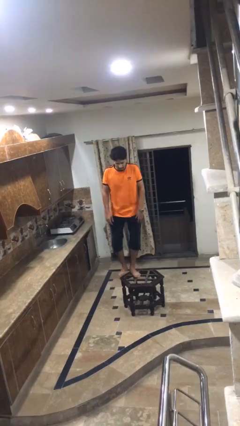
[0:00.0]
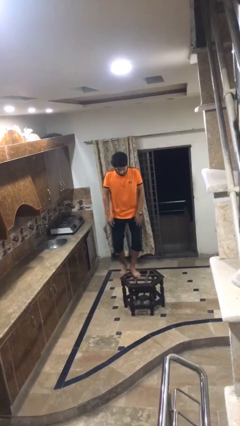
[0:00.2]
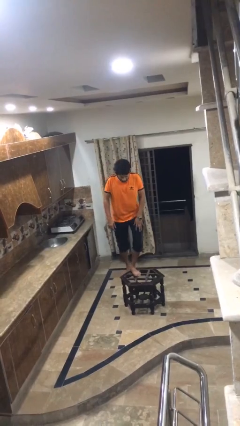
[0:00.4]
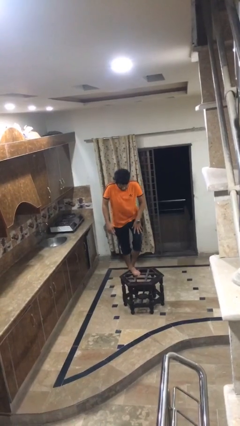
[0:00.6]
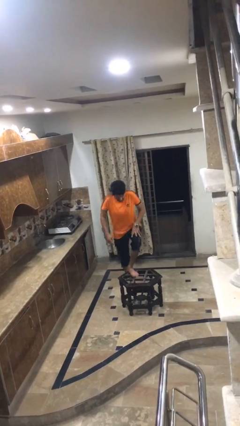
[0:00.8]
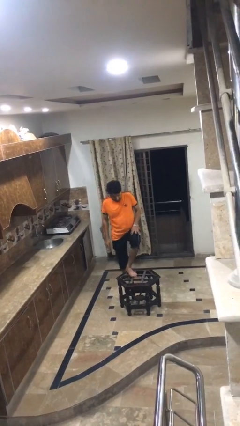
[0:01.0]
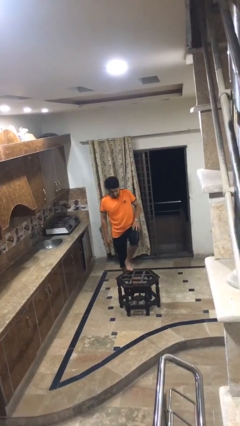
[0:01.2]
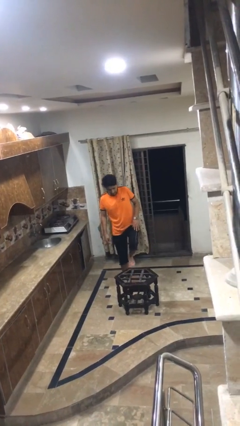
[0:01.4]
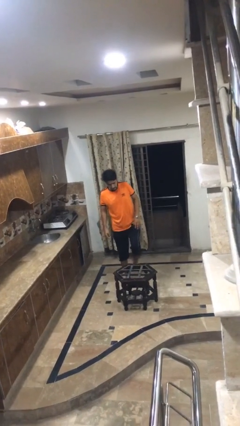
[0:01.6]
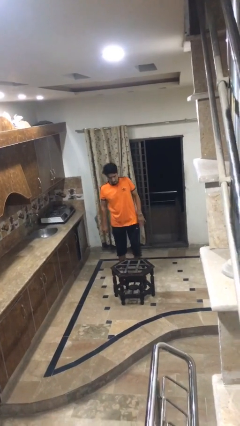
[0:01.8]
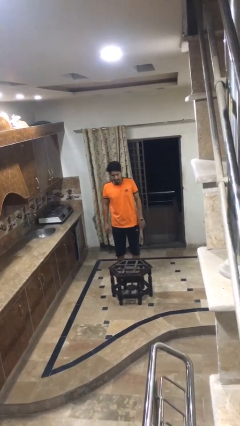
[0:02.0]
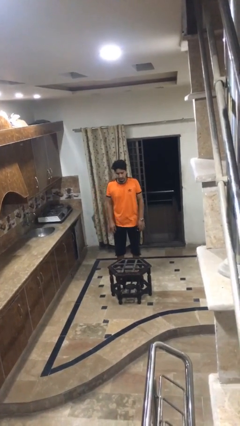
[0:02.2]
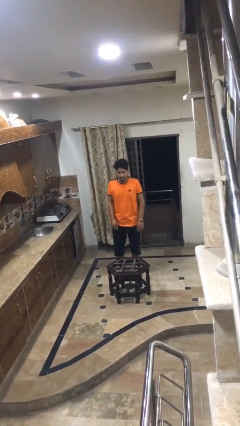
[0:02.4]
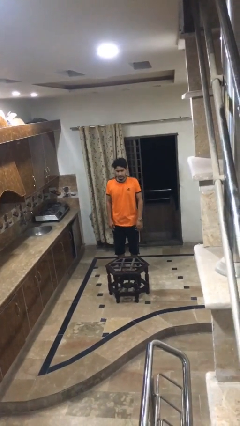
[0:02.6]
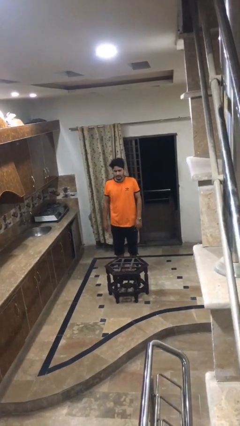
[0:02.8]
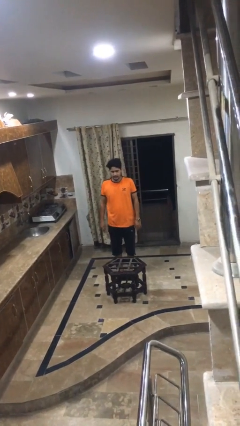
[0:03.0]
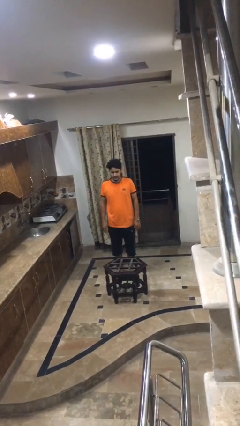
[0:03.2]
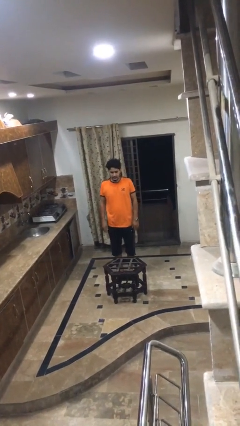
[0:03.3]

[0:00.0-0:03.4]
person climbs off table

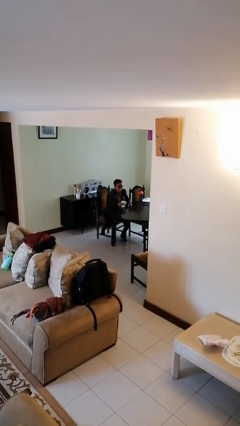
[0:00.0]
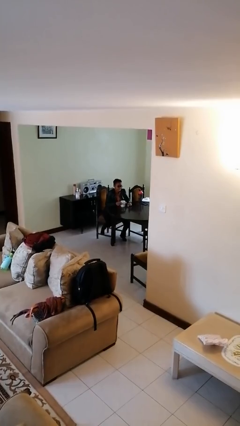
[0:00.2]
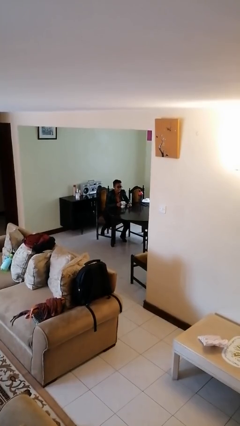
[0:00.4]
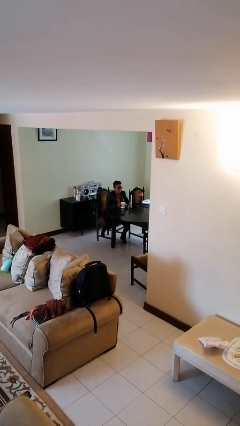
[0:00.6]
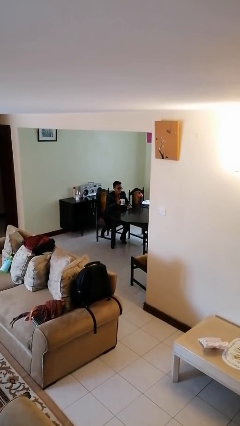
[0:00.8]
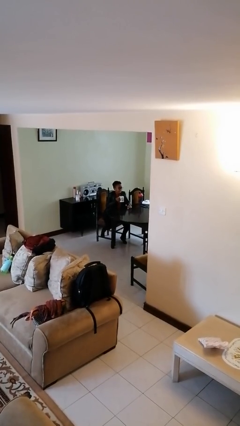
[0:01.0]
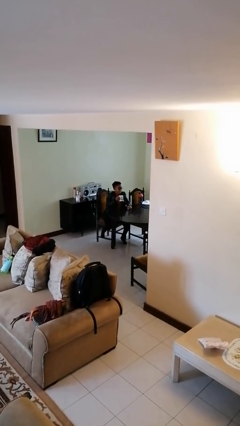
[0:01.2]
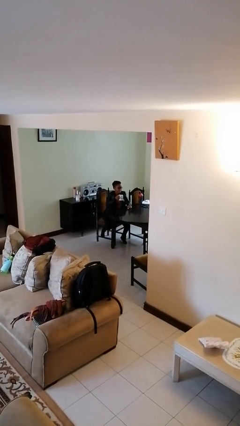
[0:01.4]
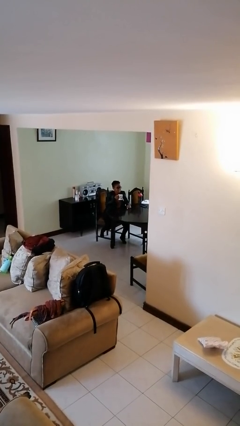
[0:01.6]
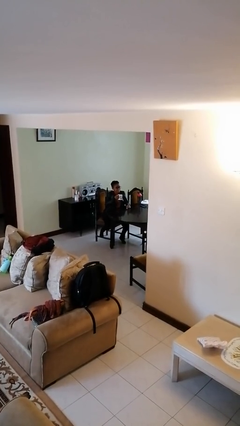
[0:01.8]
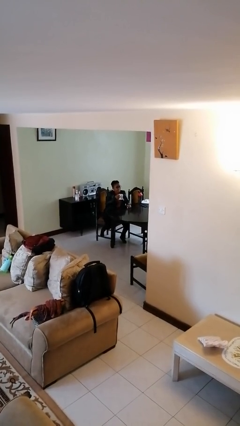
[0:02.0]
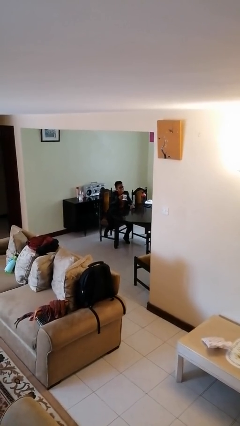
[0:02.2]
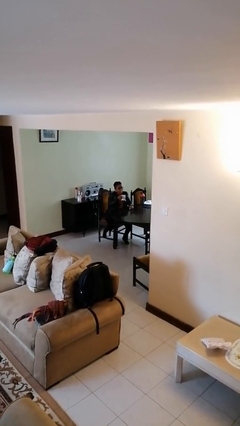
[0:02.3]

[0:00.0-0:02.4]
person picks up object from table

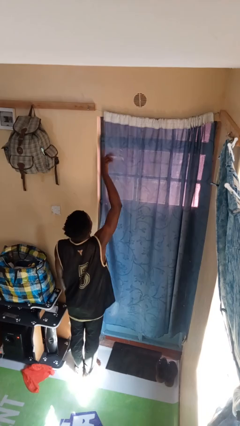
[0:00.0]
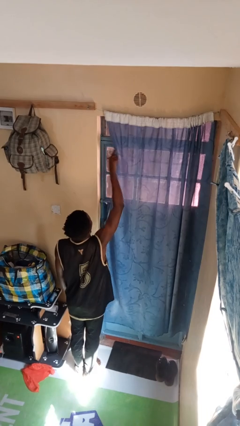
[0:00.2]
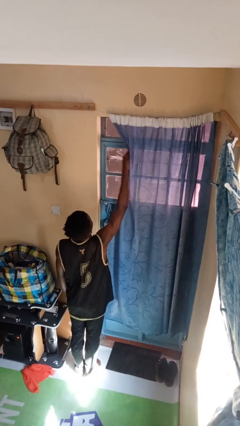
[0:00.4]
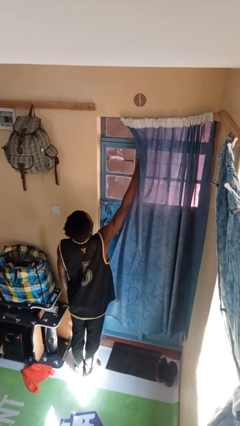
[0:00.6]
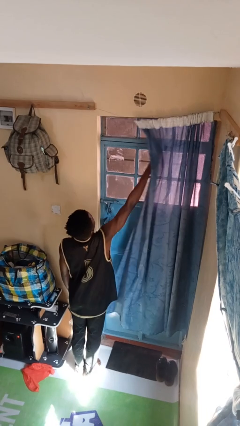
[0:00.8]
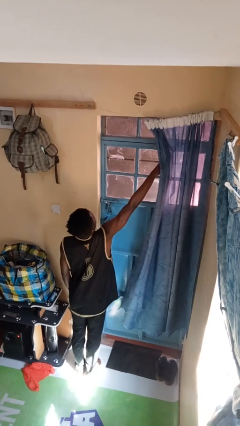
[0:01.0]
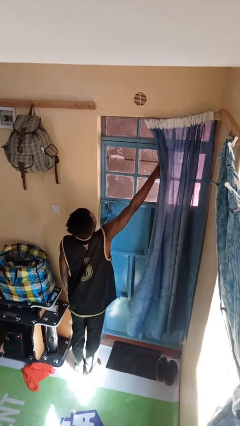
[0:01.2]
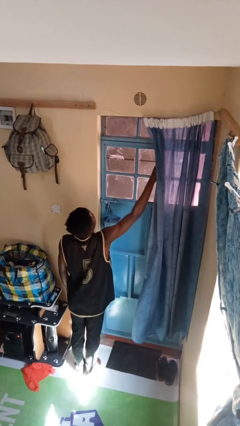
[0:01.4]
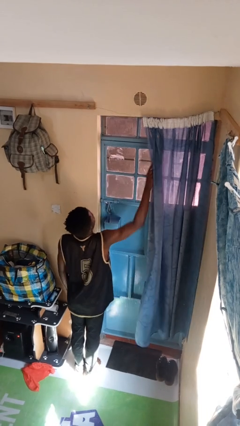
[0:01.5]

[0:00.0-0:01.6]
person opens curtains

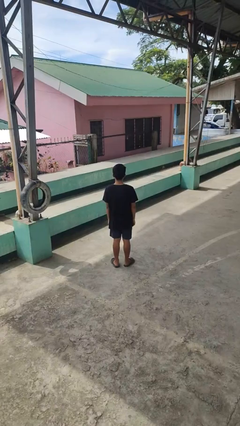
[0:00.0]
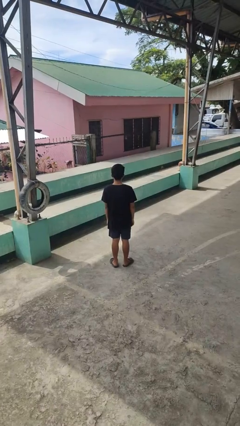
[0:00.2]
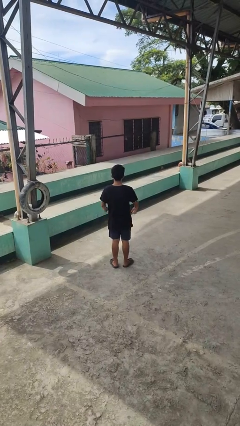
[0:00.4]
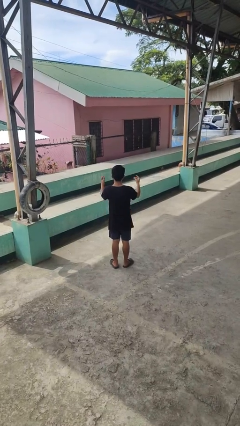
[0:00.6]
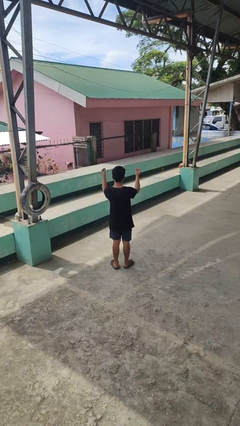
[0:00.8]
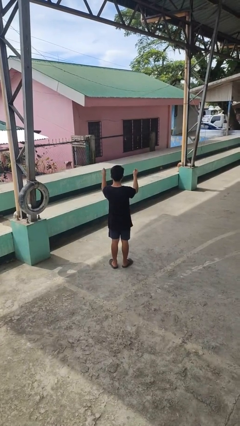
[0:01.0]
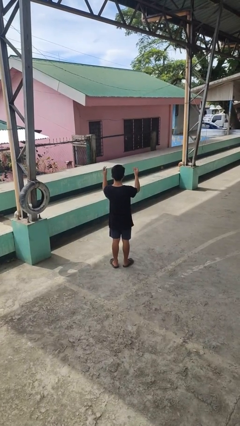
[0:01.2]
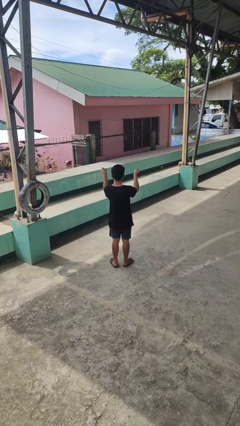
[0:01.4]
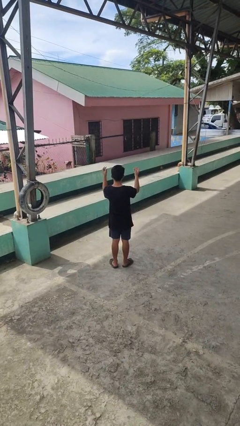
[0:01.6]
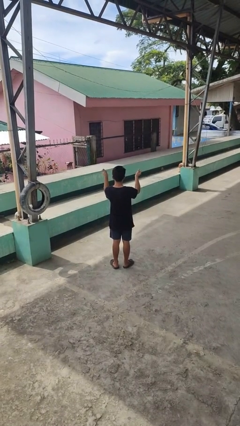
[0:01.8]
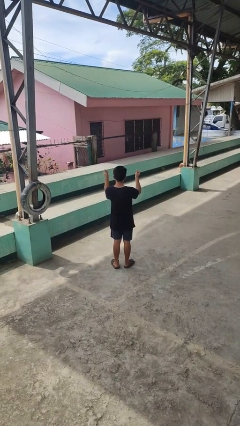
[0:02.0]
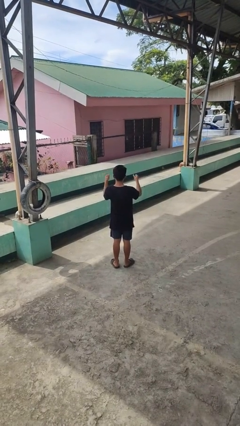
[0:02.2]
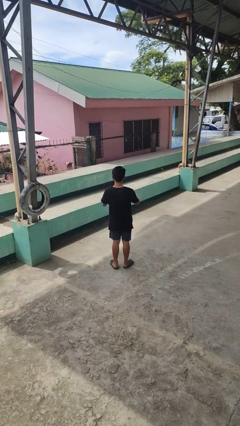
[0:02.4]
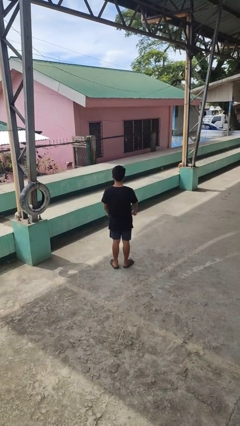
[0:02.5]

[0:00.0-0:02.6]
person snaps fingers

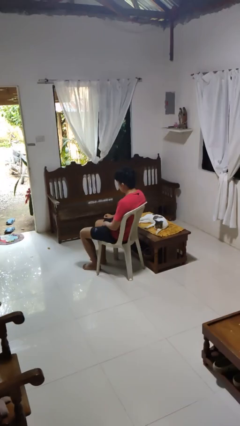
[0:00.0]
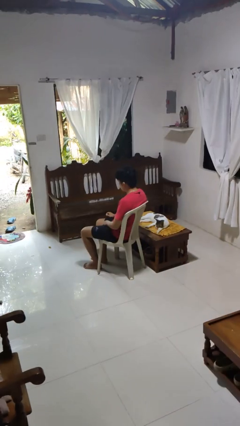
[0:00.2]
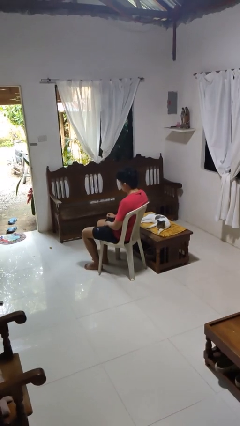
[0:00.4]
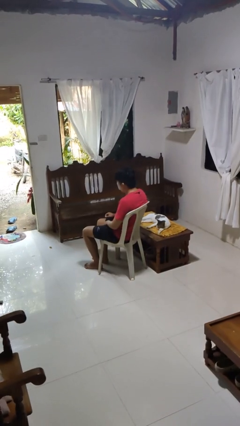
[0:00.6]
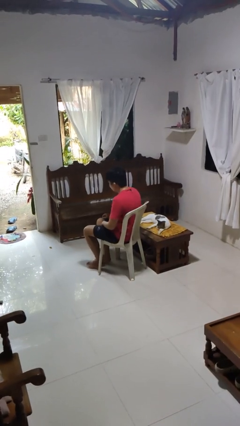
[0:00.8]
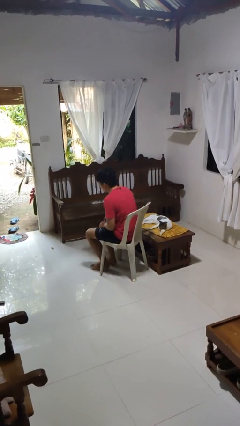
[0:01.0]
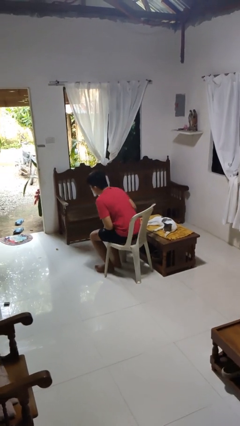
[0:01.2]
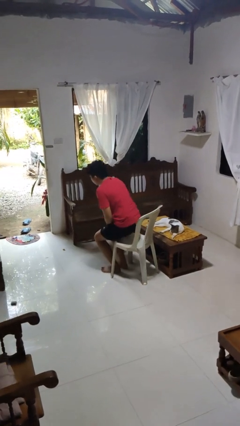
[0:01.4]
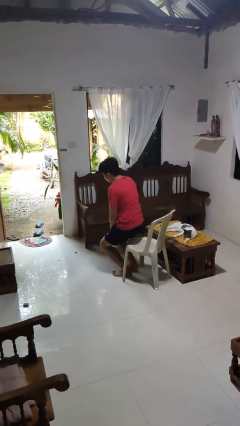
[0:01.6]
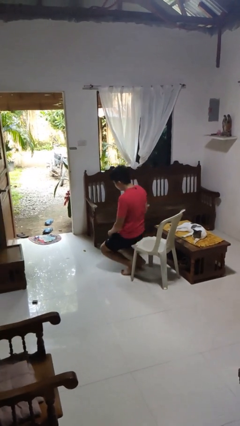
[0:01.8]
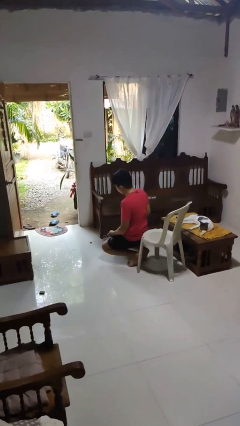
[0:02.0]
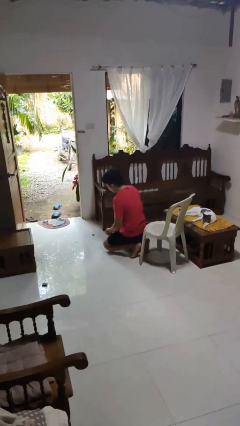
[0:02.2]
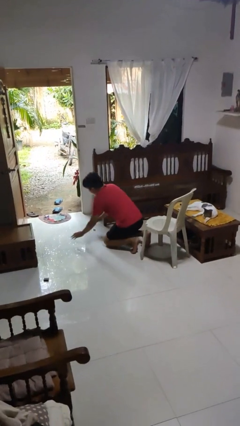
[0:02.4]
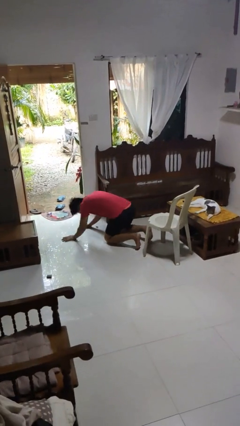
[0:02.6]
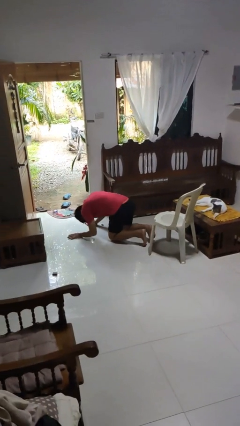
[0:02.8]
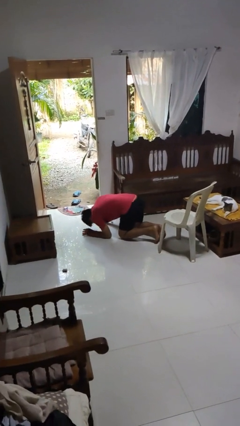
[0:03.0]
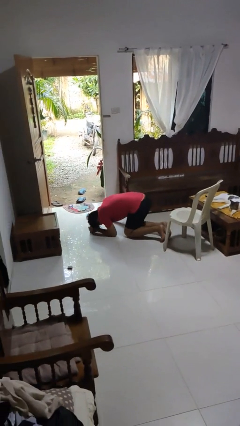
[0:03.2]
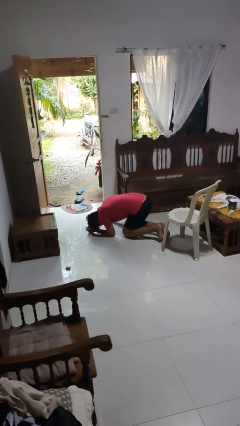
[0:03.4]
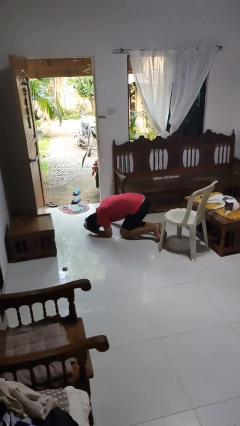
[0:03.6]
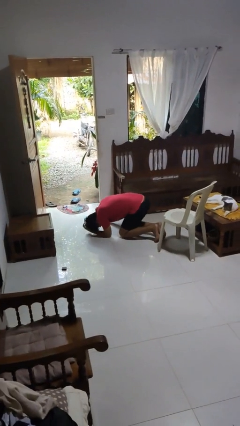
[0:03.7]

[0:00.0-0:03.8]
person falls from chair

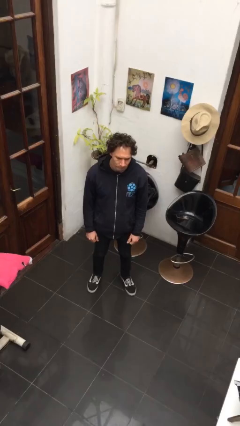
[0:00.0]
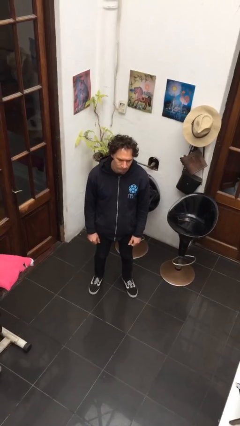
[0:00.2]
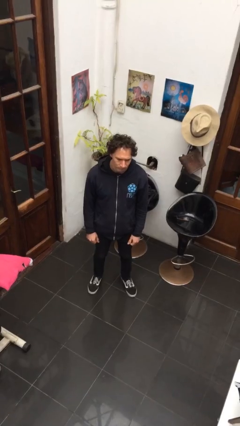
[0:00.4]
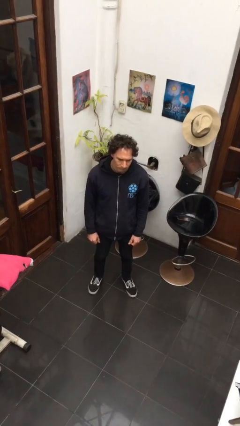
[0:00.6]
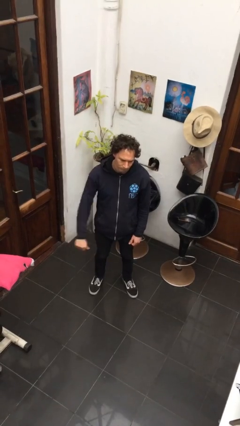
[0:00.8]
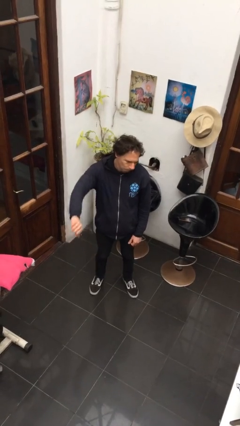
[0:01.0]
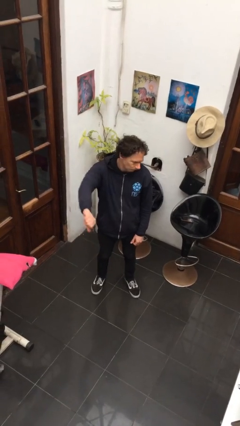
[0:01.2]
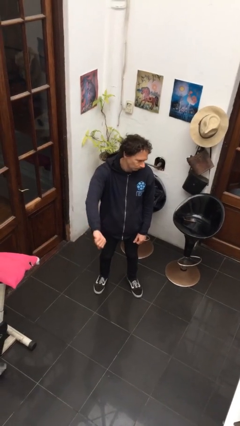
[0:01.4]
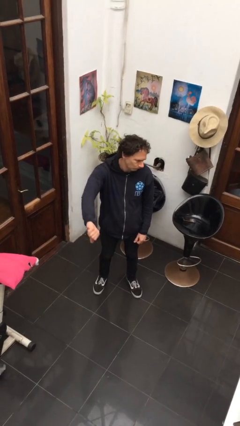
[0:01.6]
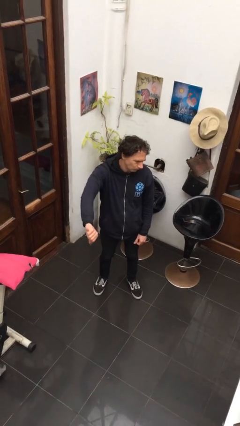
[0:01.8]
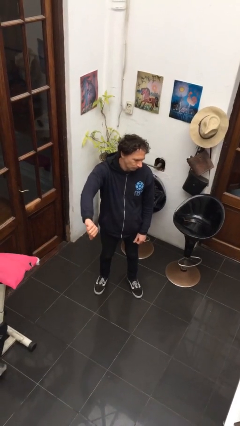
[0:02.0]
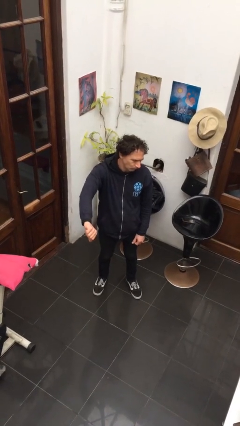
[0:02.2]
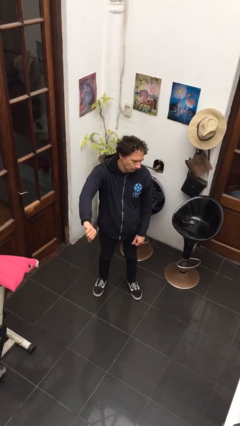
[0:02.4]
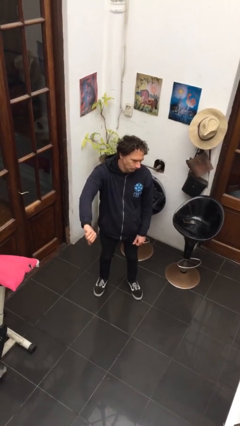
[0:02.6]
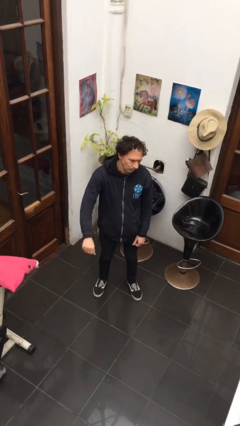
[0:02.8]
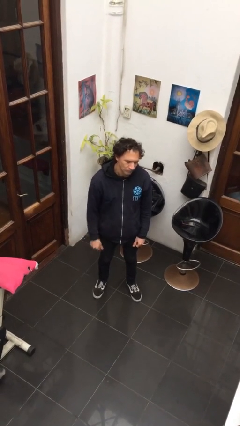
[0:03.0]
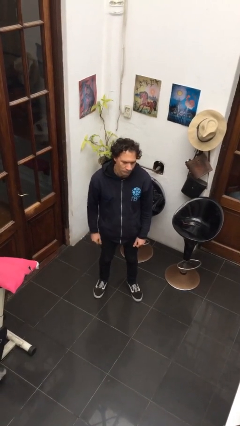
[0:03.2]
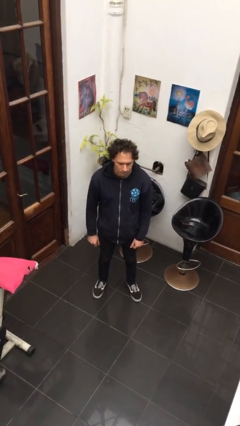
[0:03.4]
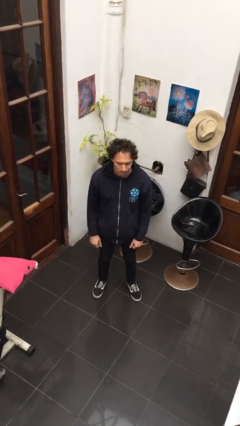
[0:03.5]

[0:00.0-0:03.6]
person gestures thumbs down
